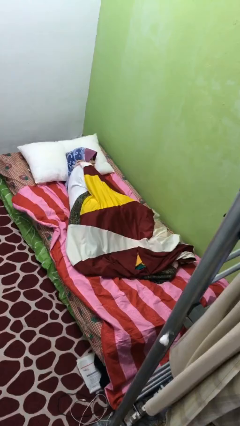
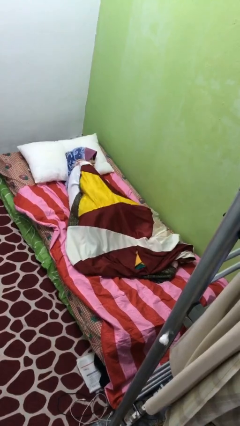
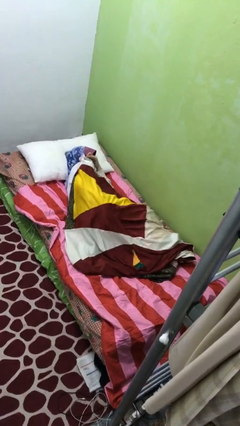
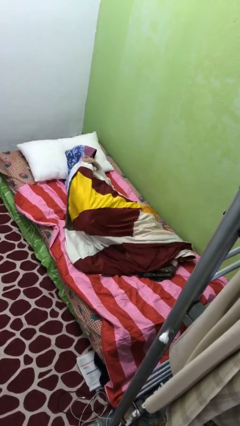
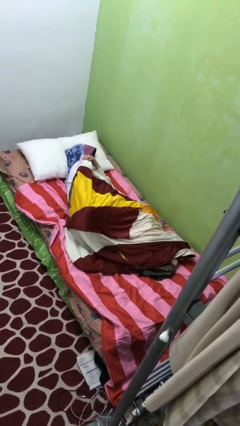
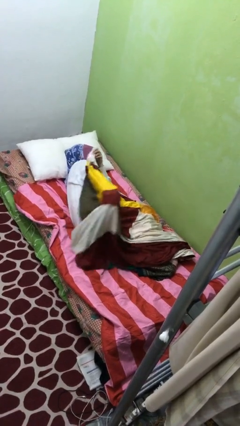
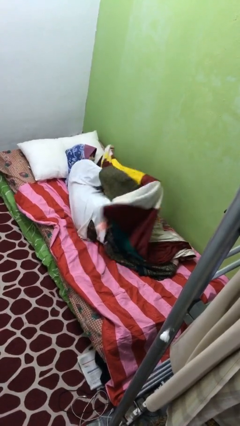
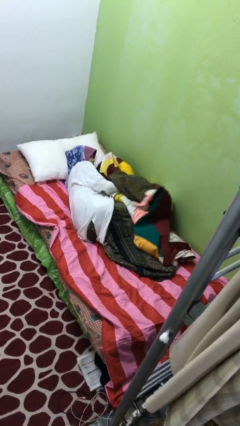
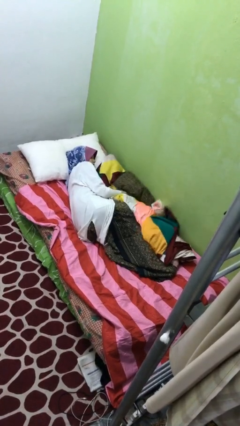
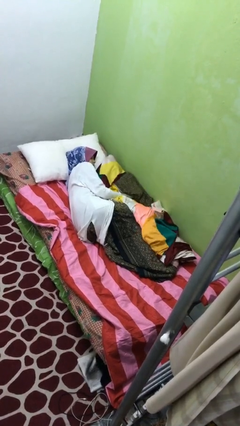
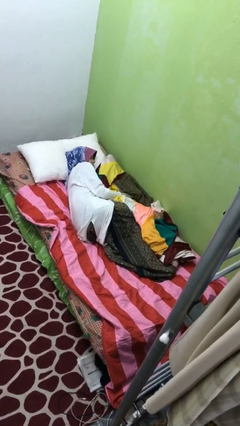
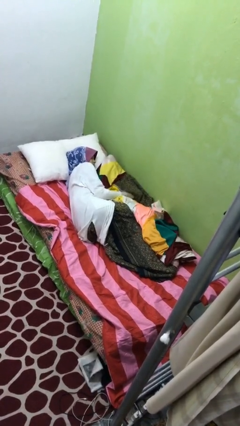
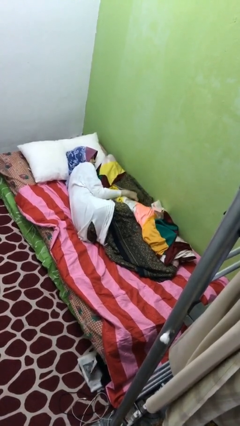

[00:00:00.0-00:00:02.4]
person uncovers with blanket

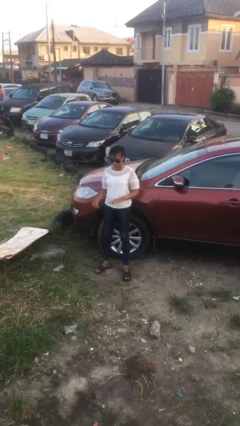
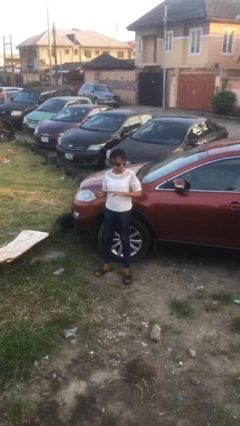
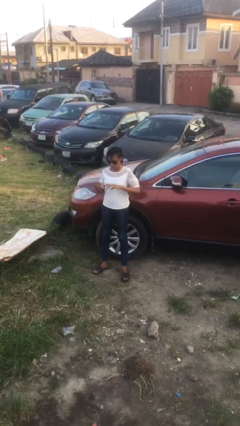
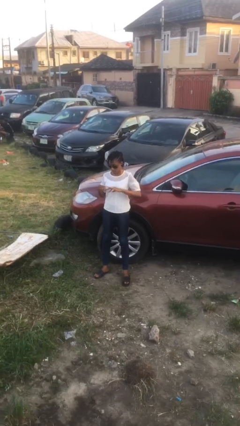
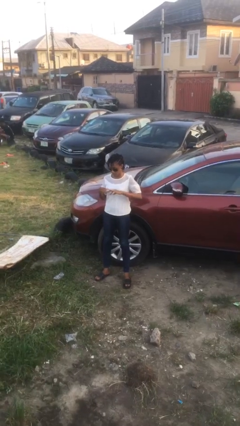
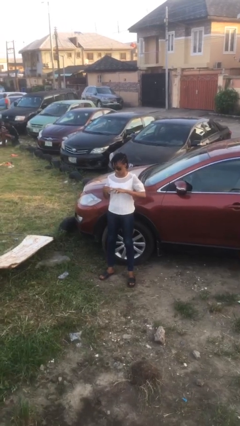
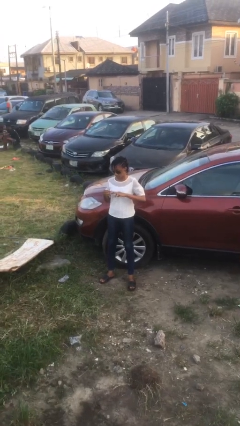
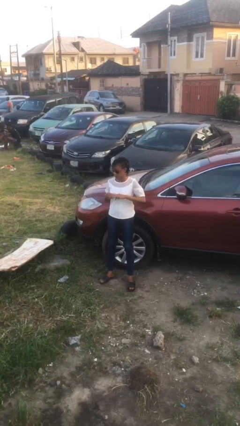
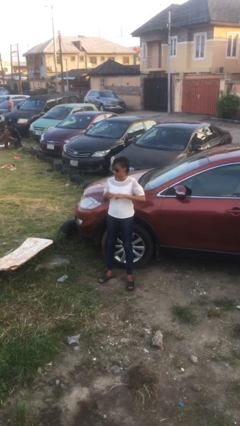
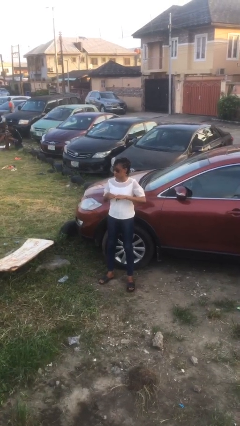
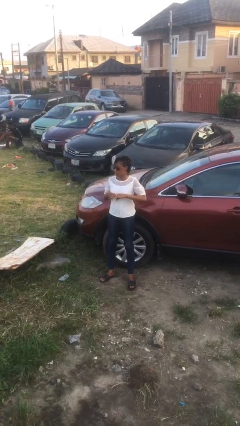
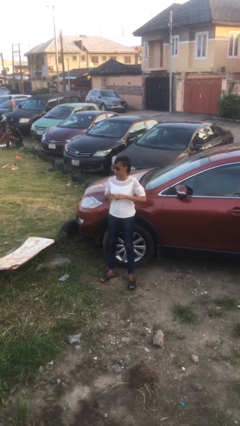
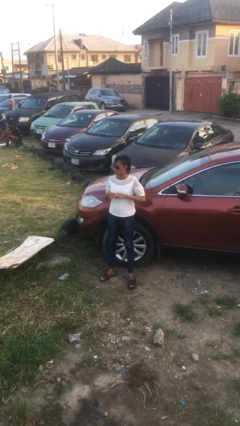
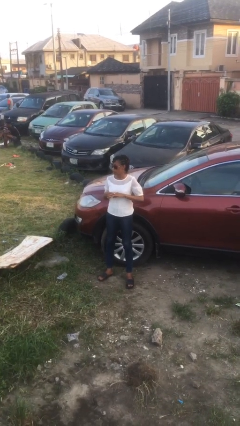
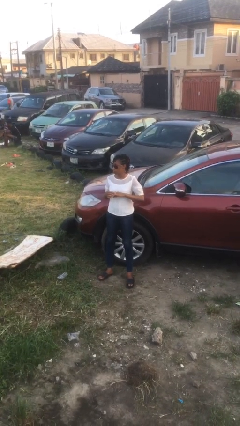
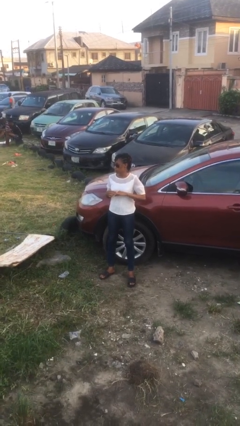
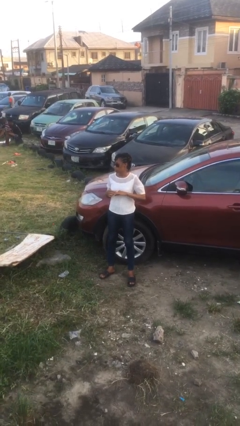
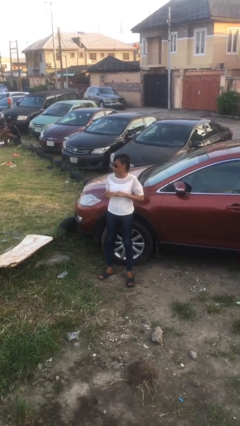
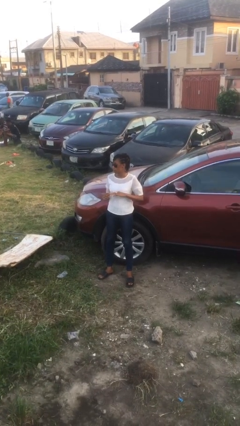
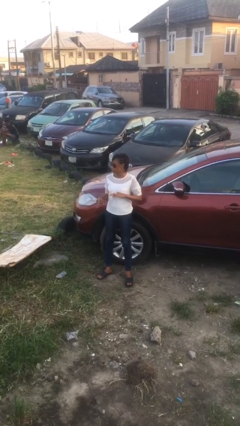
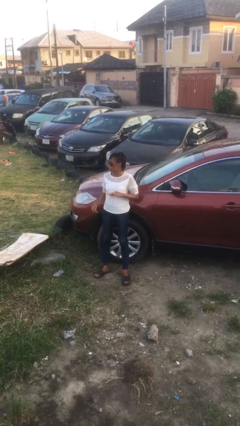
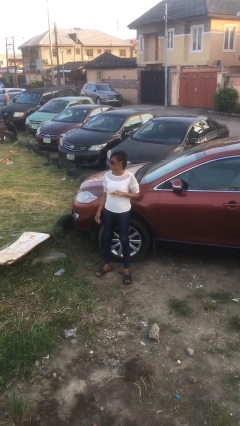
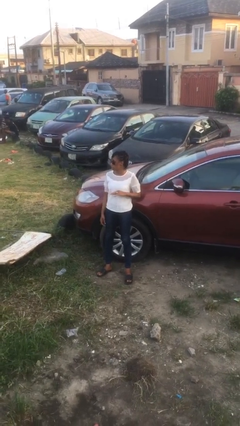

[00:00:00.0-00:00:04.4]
person puts on ring

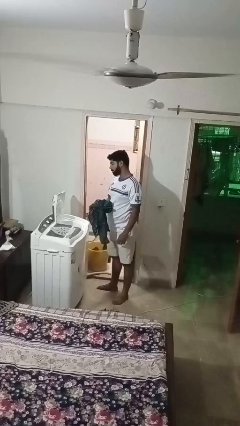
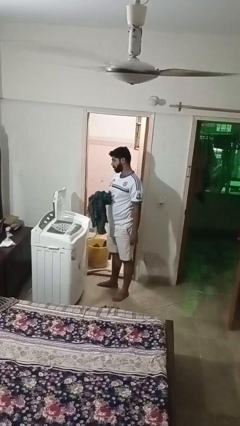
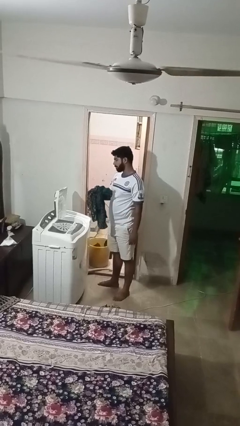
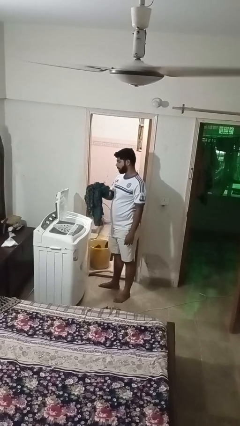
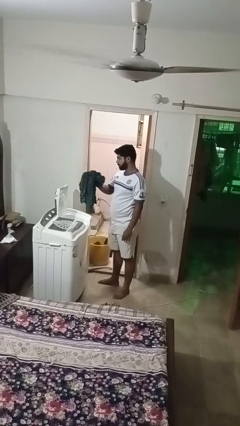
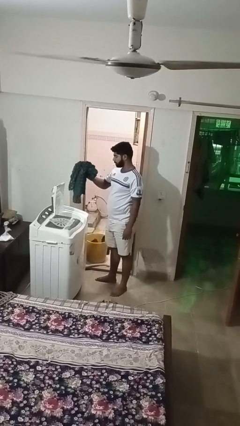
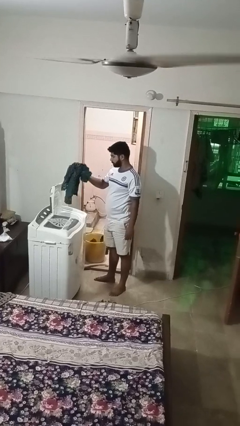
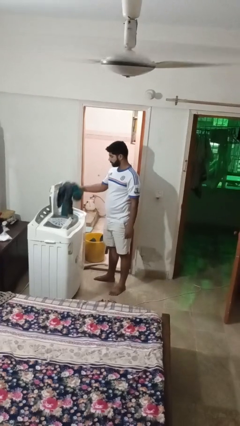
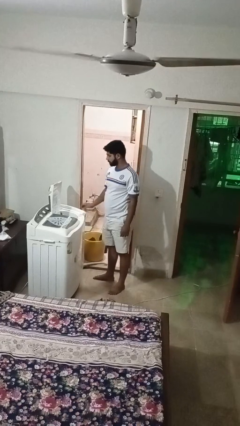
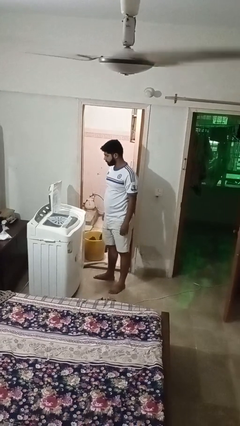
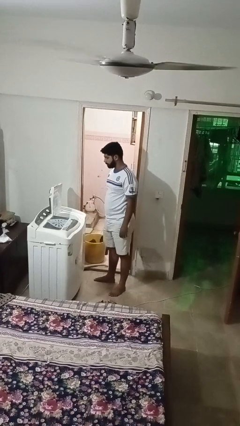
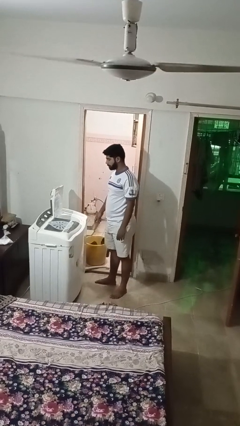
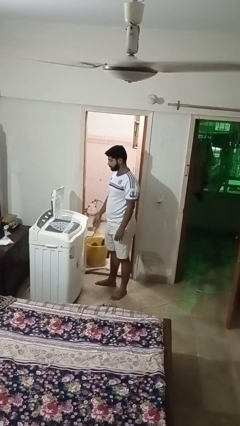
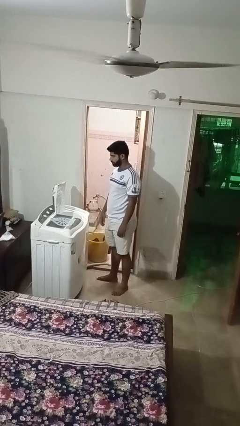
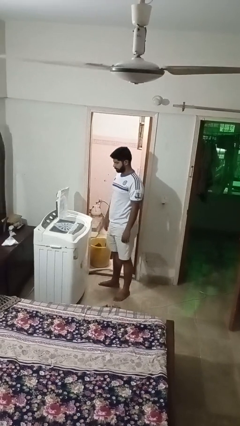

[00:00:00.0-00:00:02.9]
person loads dryer

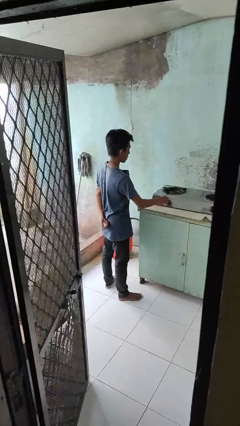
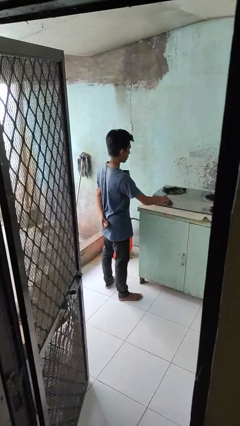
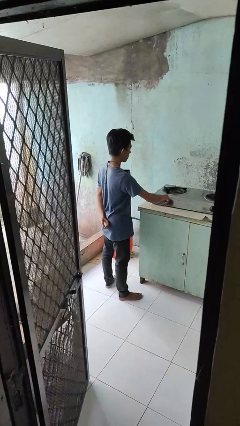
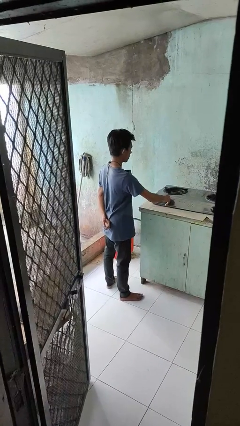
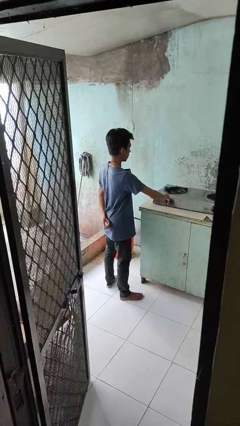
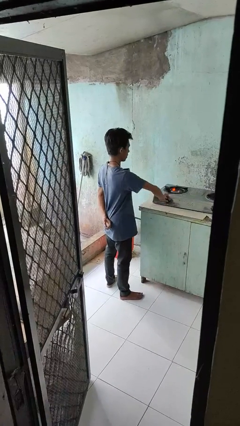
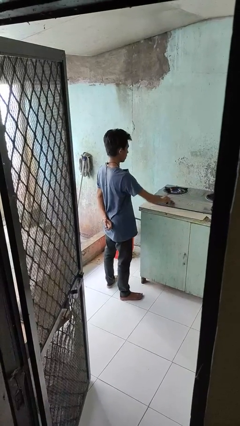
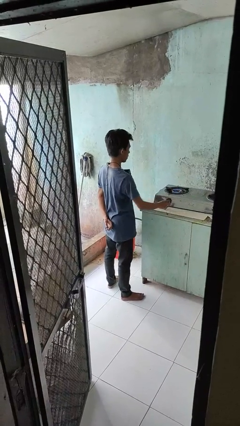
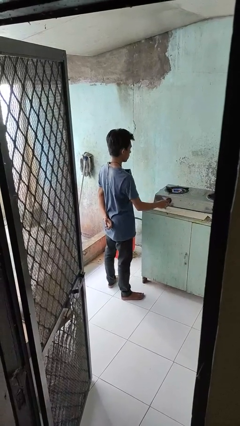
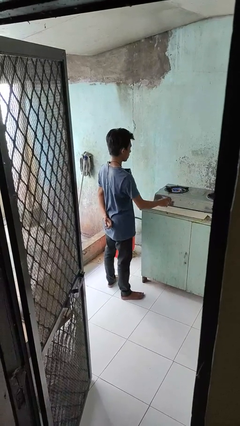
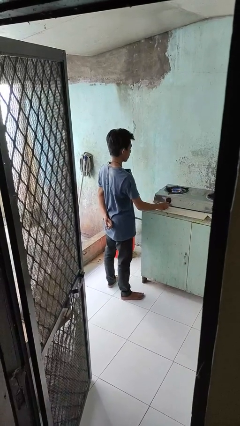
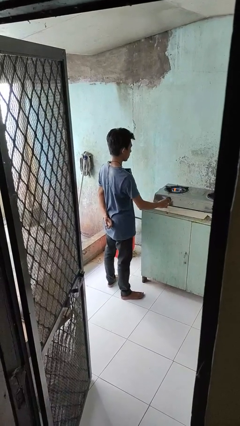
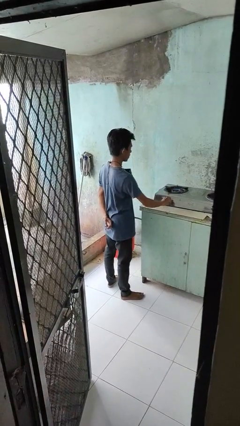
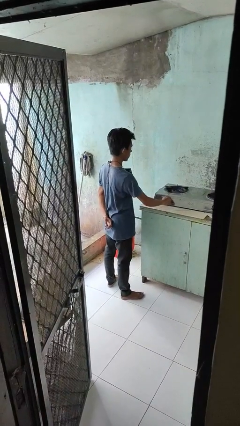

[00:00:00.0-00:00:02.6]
person turns on stovetop

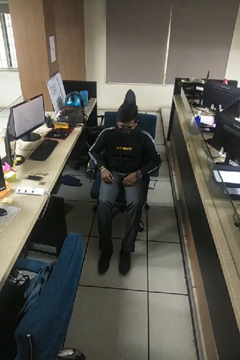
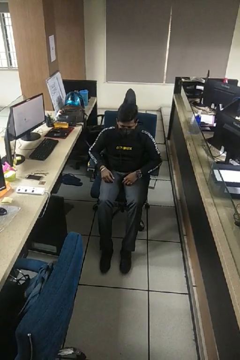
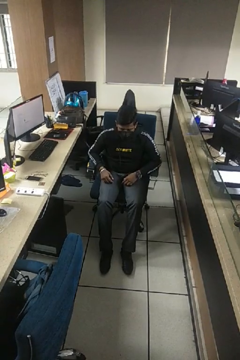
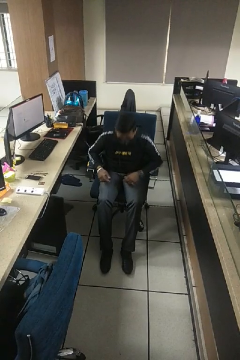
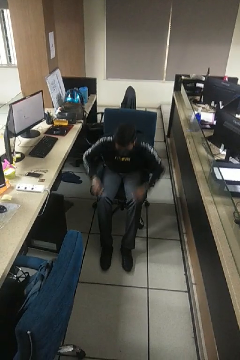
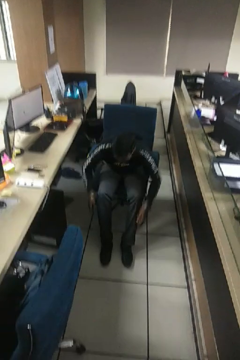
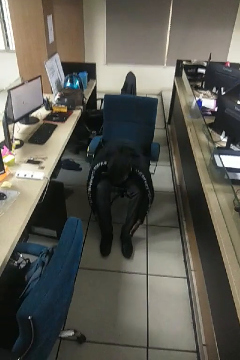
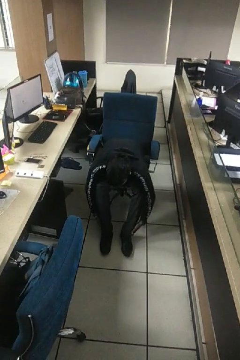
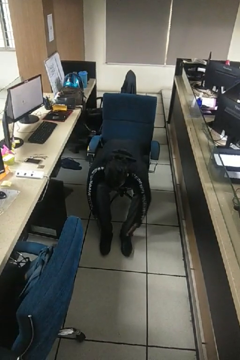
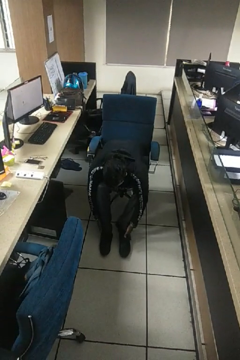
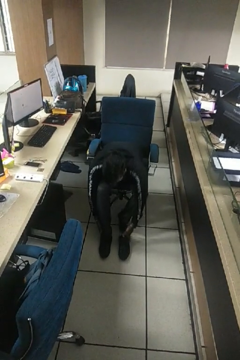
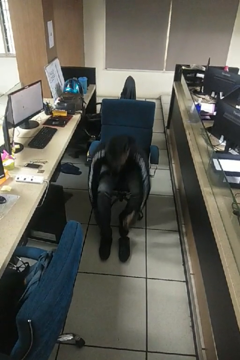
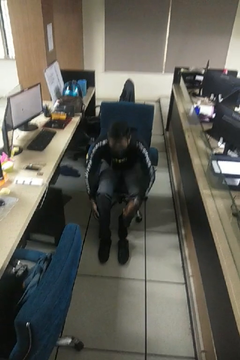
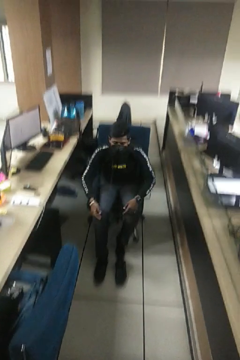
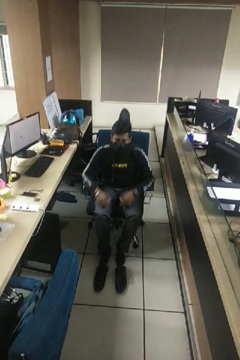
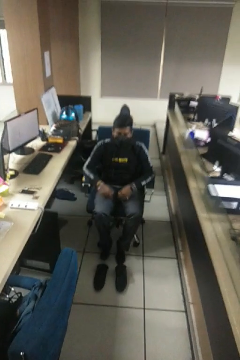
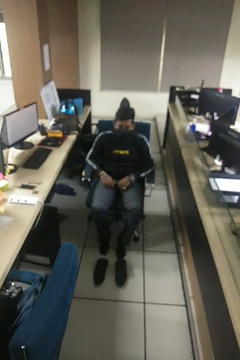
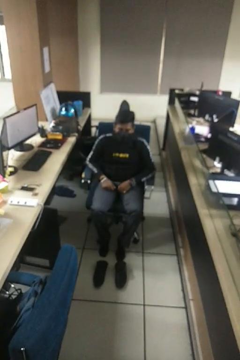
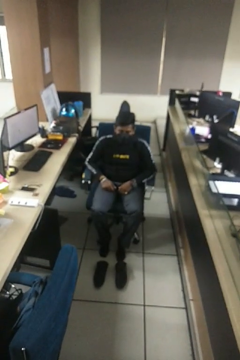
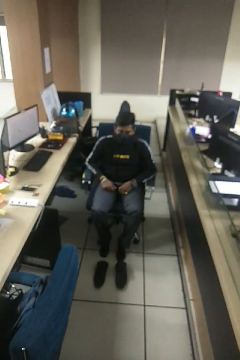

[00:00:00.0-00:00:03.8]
person takes off shoes

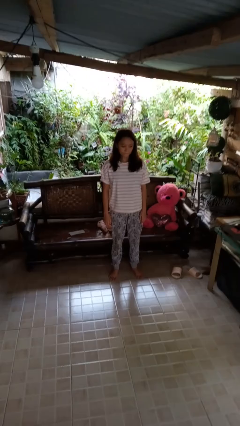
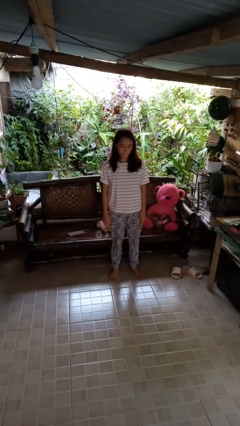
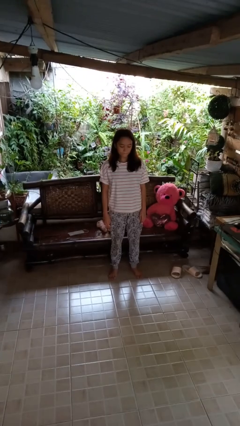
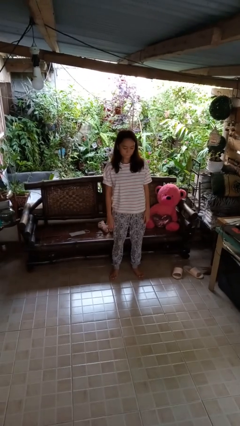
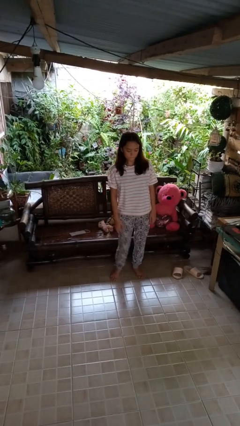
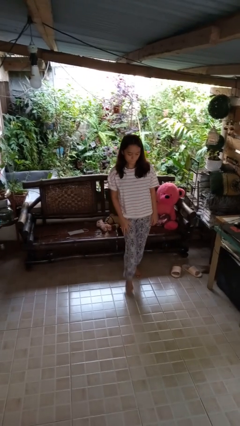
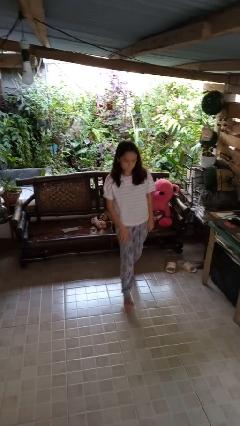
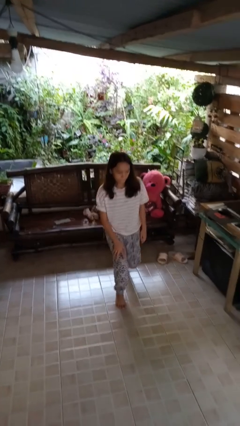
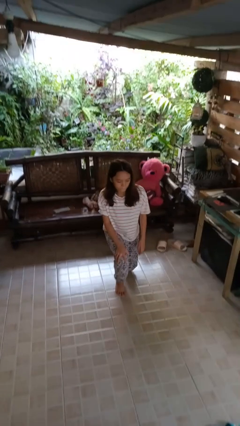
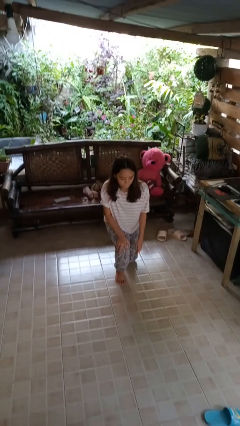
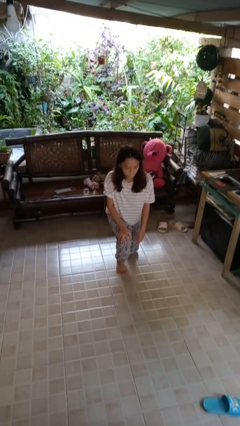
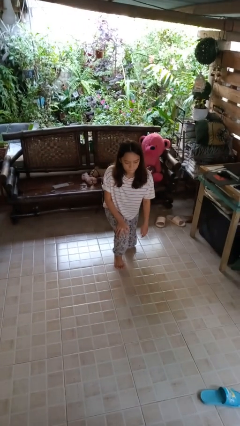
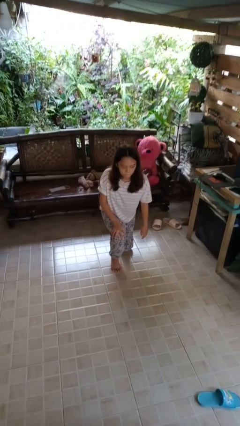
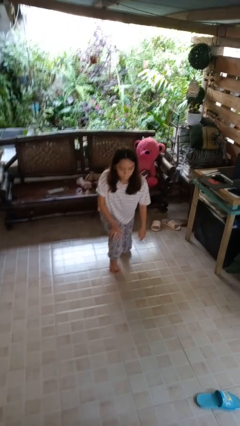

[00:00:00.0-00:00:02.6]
person kneels
